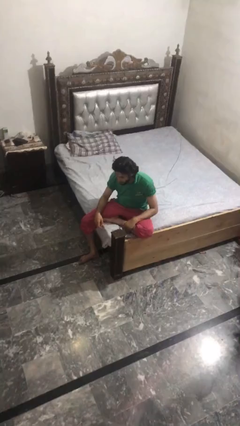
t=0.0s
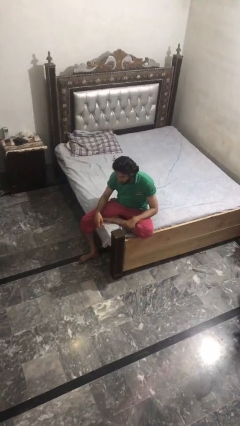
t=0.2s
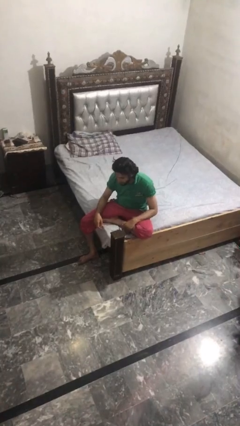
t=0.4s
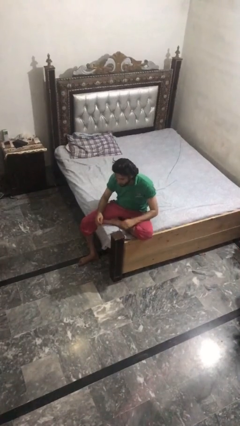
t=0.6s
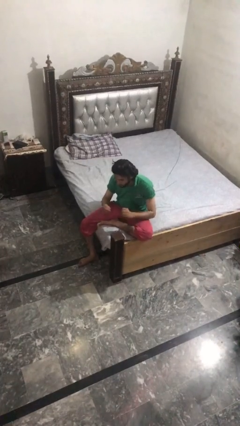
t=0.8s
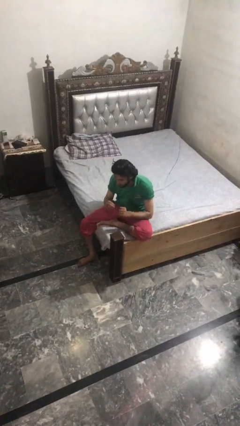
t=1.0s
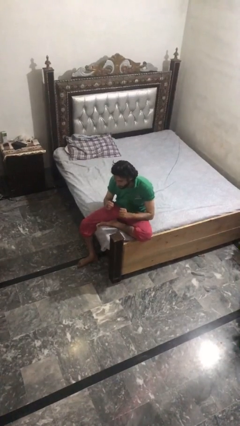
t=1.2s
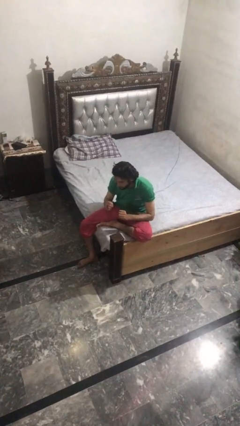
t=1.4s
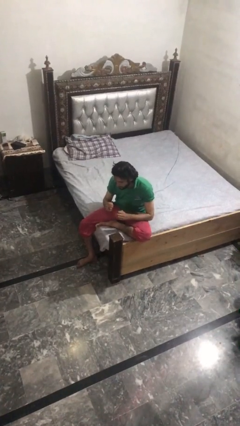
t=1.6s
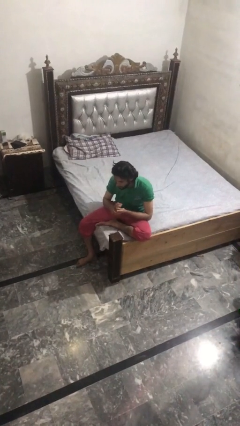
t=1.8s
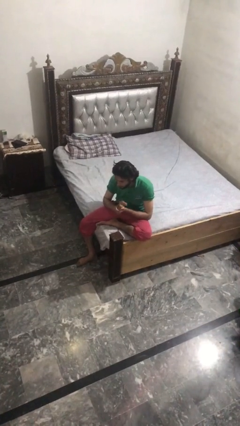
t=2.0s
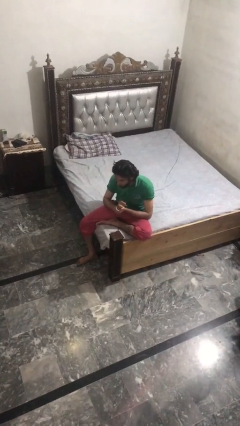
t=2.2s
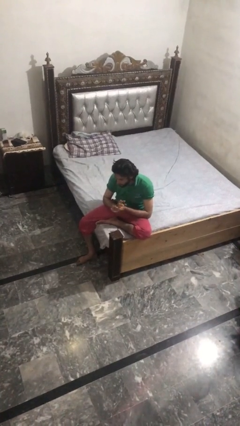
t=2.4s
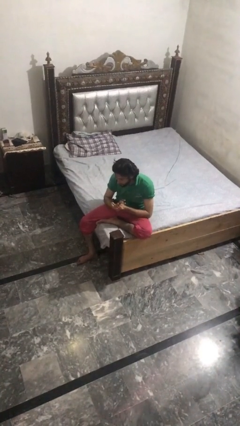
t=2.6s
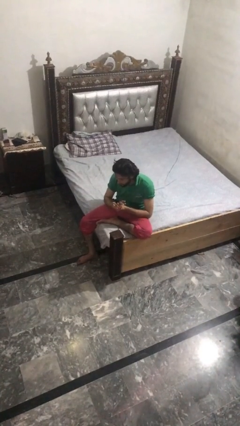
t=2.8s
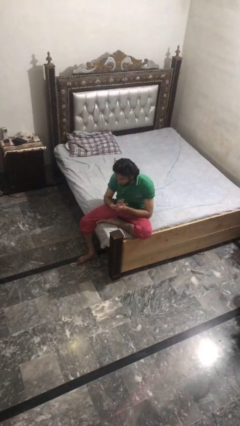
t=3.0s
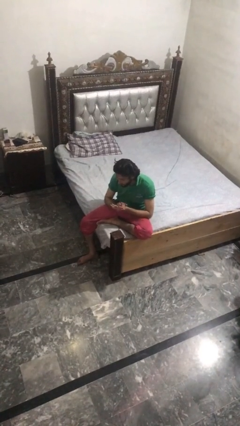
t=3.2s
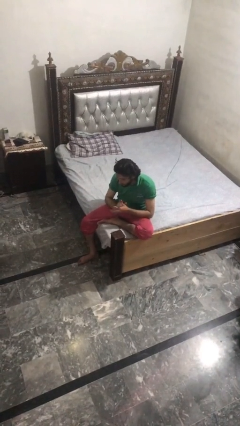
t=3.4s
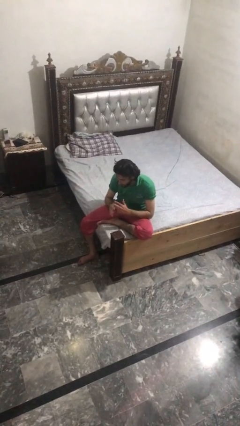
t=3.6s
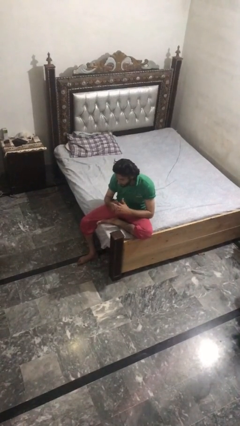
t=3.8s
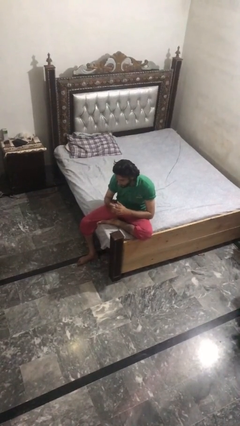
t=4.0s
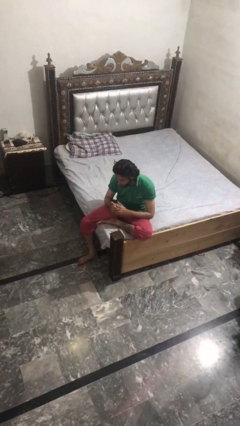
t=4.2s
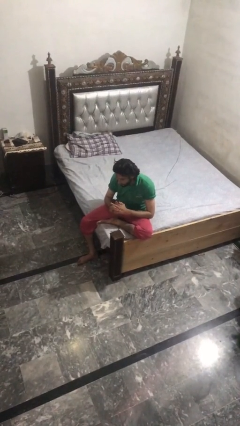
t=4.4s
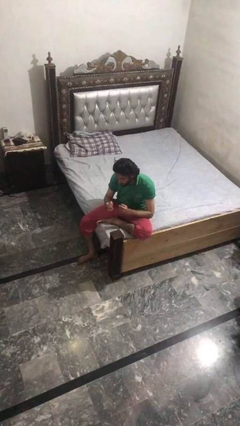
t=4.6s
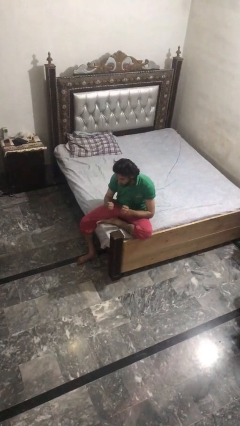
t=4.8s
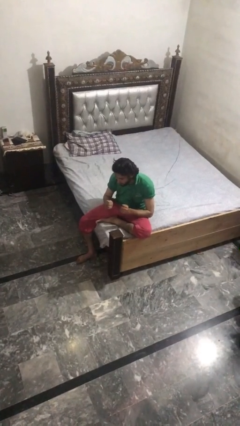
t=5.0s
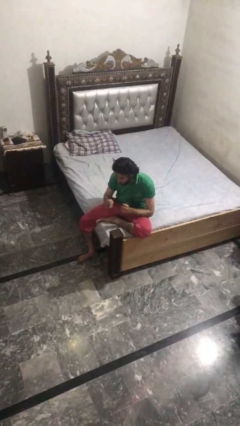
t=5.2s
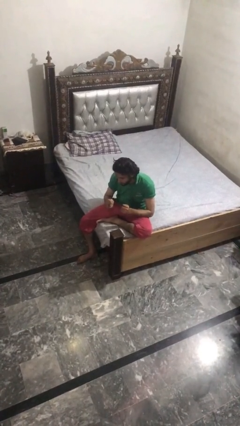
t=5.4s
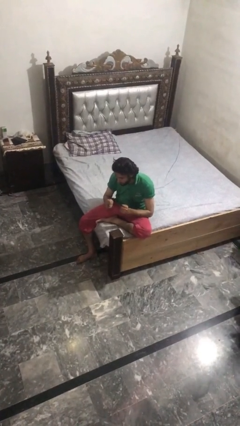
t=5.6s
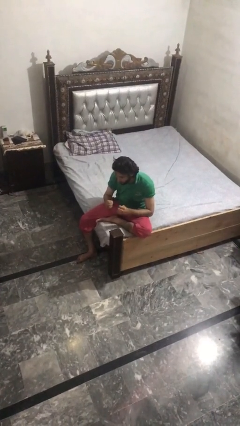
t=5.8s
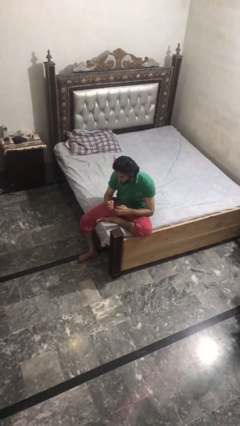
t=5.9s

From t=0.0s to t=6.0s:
person cracks knuckles

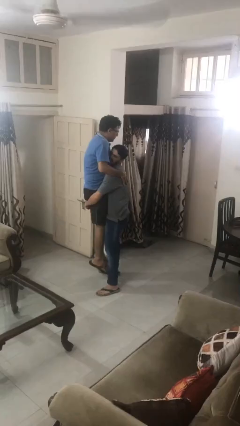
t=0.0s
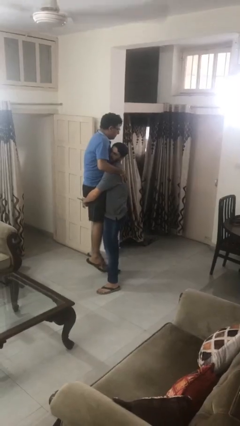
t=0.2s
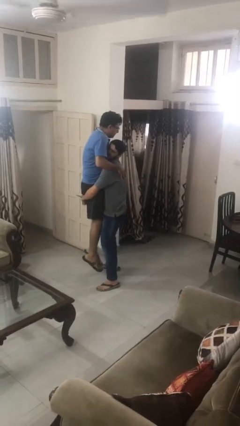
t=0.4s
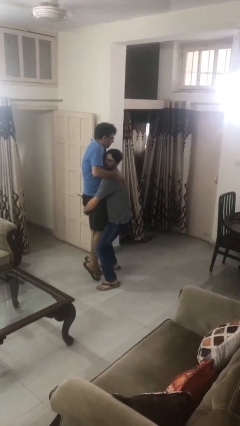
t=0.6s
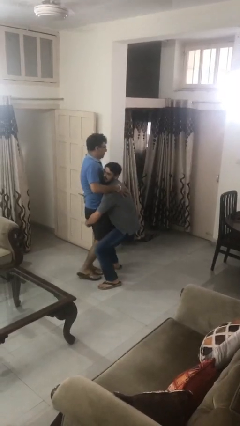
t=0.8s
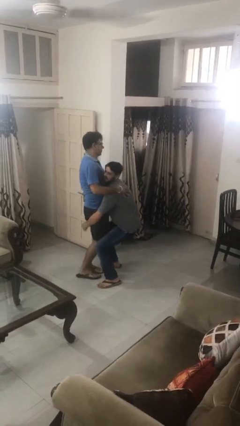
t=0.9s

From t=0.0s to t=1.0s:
person puts down person

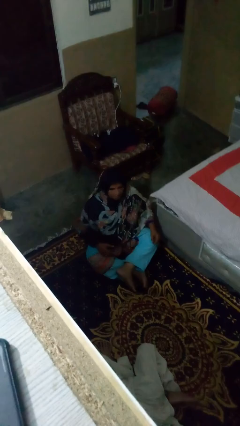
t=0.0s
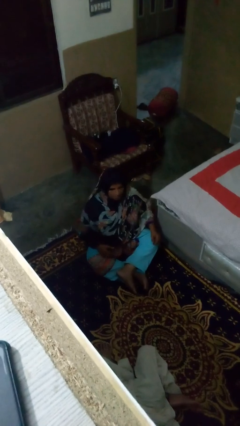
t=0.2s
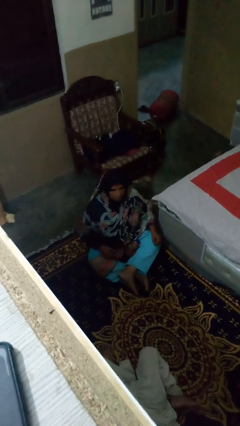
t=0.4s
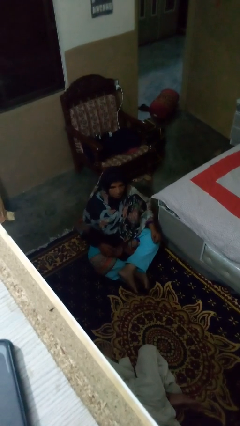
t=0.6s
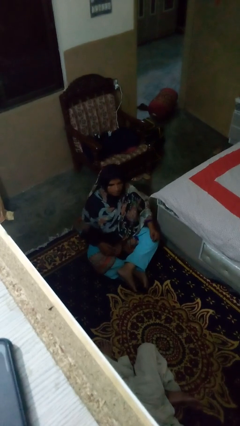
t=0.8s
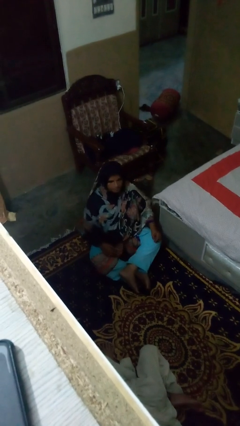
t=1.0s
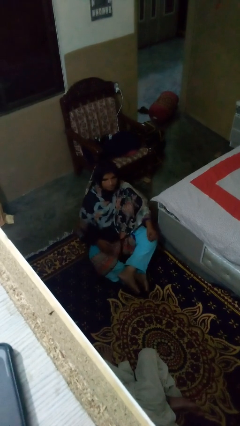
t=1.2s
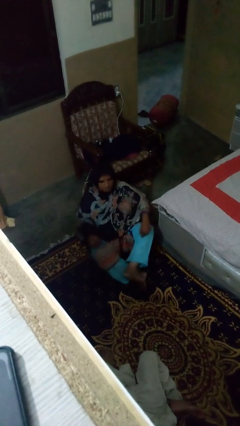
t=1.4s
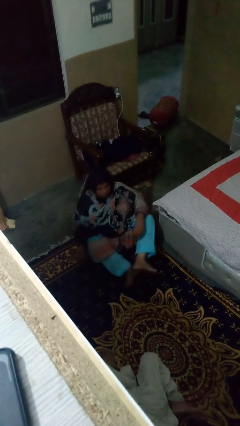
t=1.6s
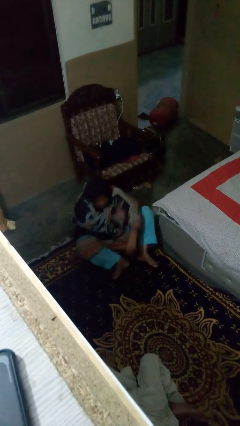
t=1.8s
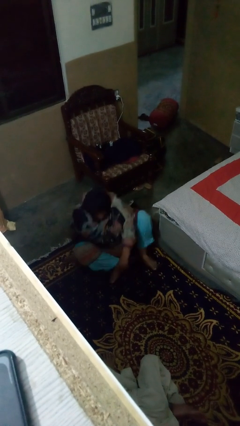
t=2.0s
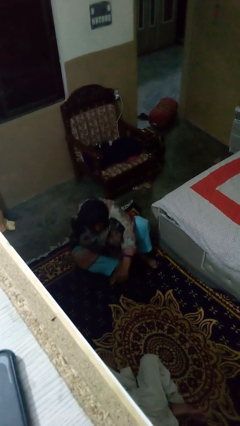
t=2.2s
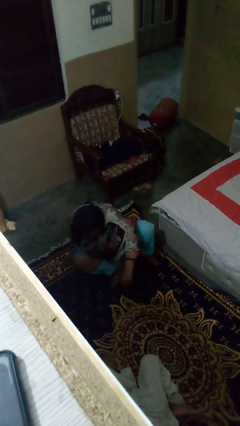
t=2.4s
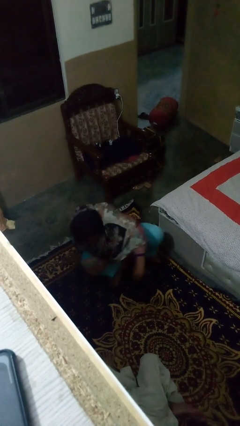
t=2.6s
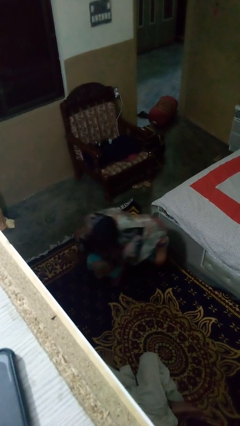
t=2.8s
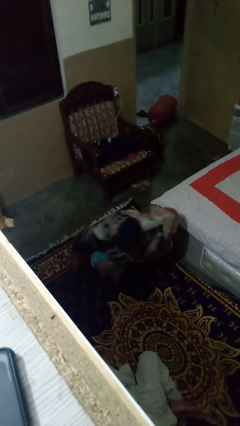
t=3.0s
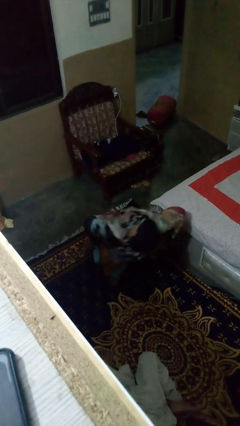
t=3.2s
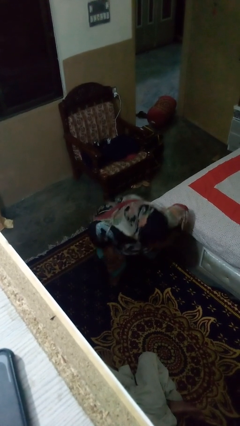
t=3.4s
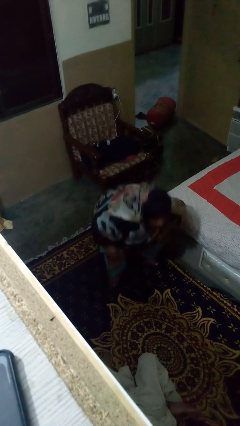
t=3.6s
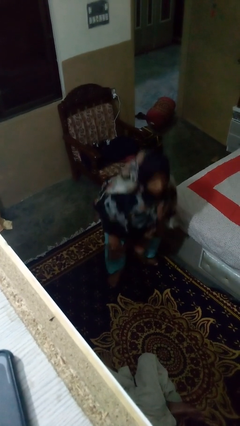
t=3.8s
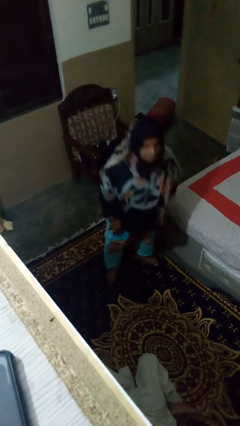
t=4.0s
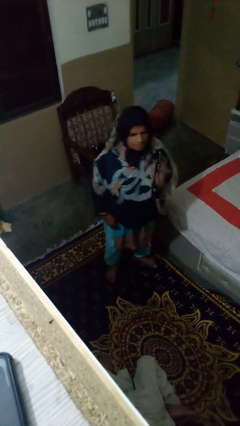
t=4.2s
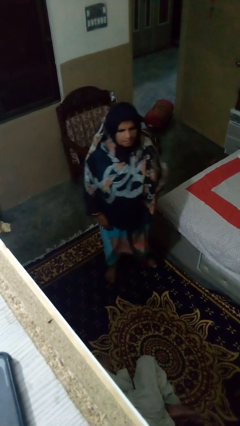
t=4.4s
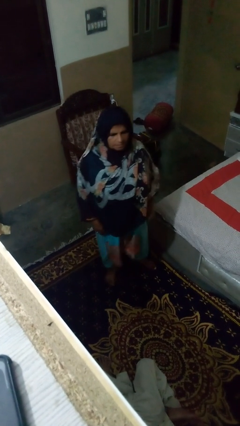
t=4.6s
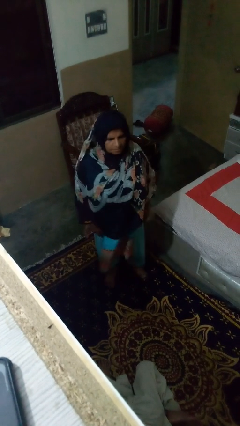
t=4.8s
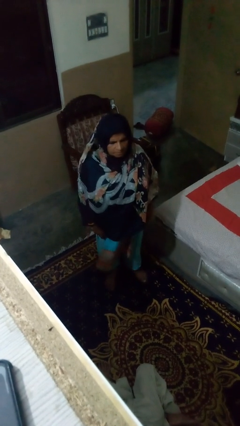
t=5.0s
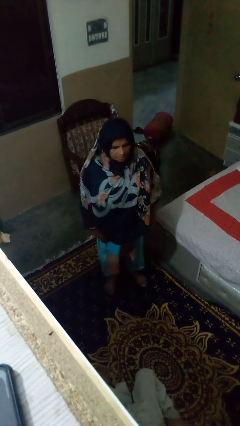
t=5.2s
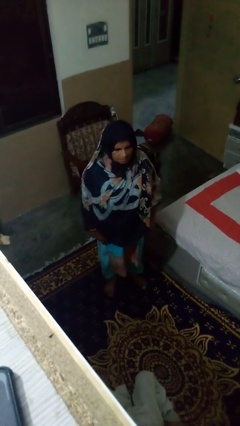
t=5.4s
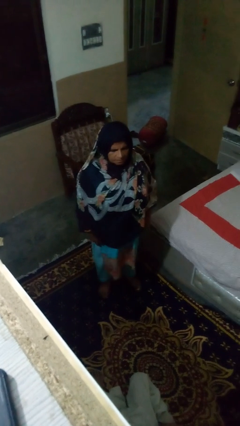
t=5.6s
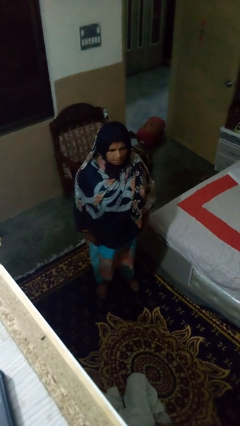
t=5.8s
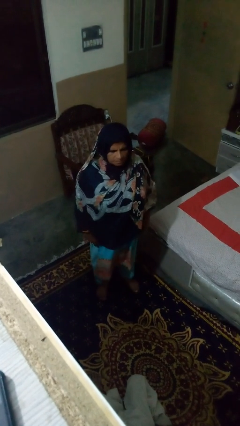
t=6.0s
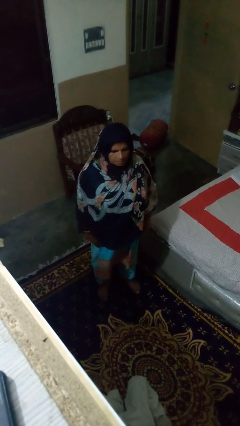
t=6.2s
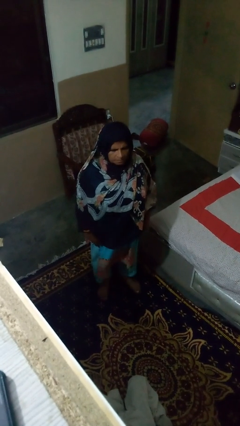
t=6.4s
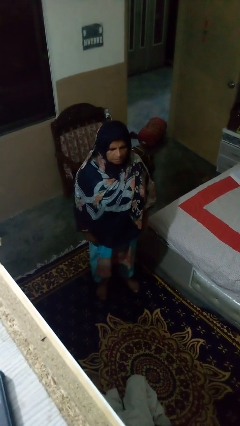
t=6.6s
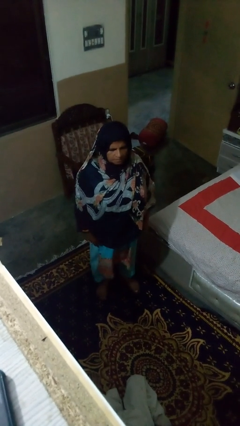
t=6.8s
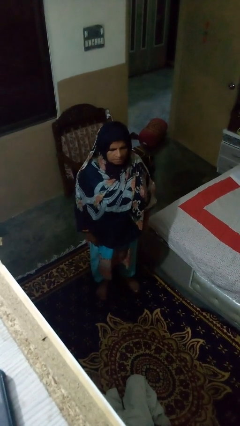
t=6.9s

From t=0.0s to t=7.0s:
person stands up from floor

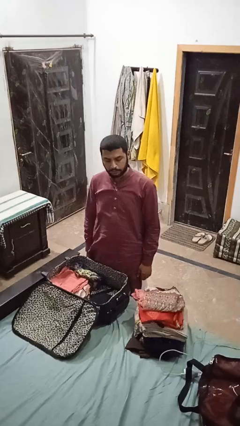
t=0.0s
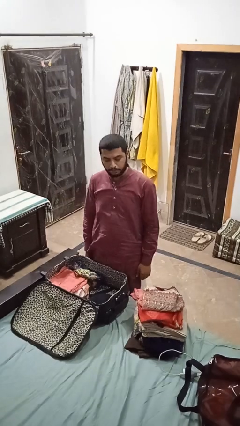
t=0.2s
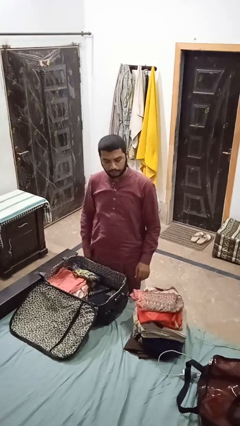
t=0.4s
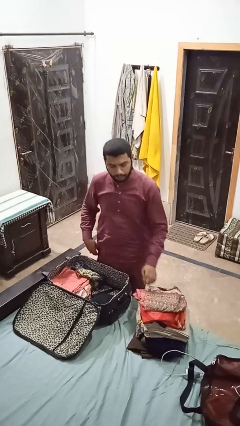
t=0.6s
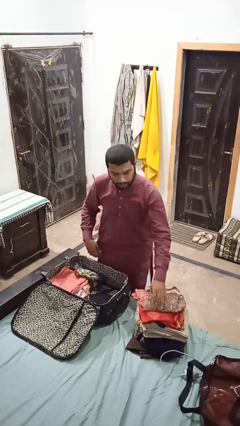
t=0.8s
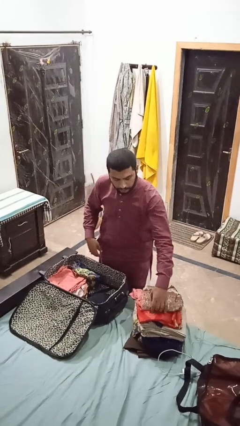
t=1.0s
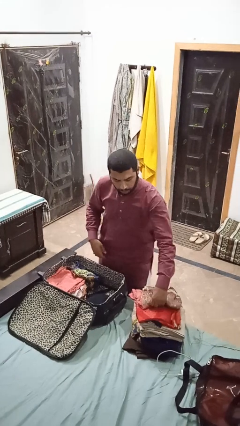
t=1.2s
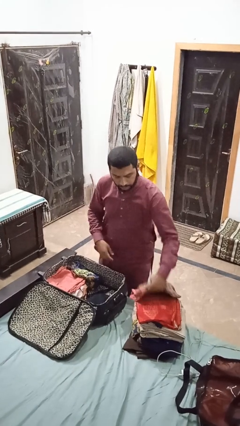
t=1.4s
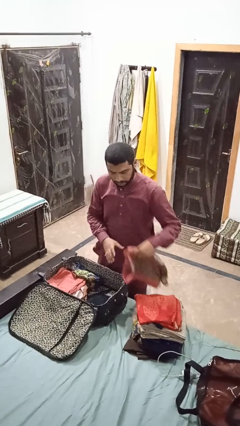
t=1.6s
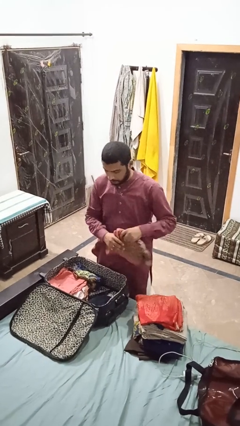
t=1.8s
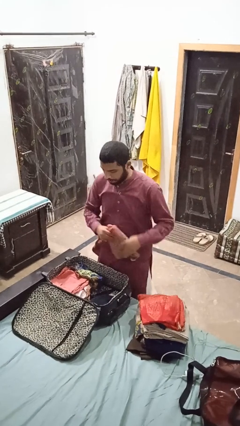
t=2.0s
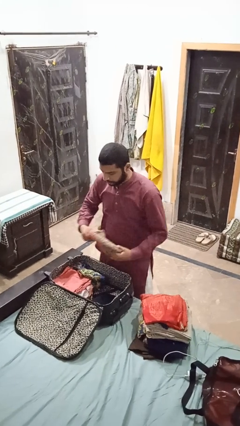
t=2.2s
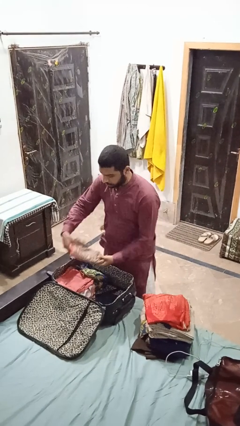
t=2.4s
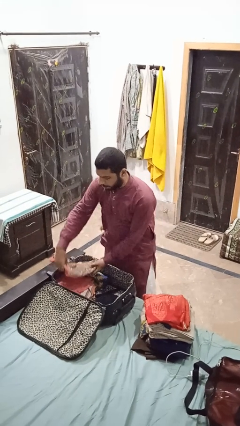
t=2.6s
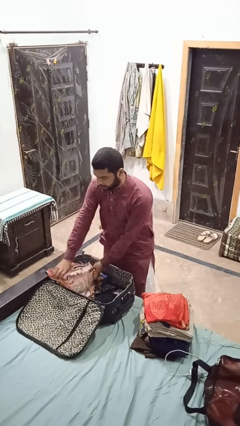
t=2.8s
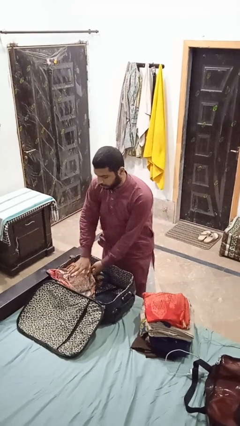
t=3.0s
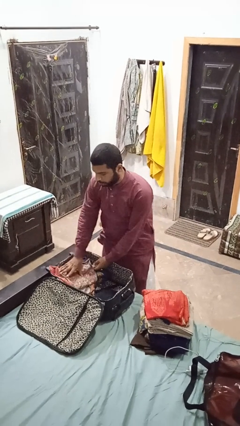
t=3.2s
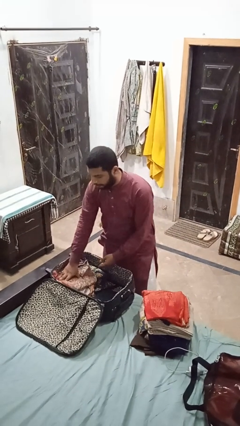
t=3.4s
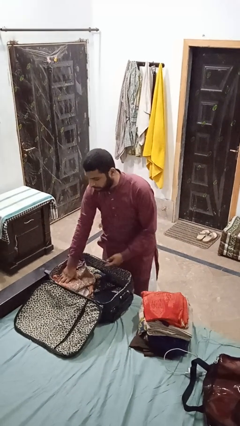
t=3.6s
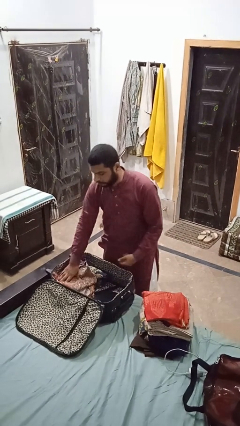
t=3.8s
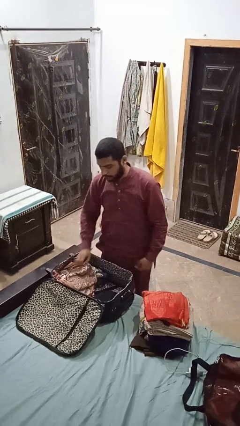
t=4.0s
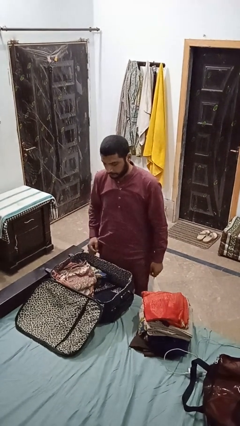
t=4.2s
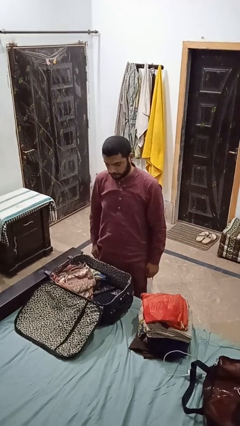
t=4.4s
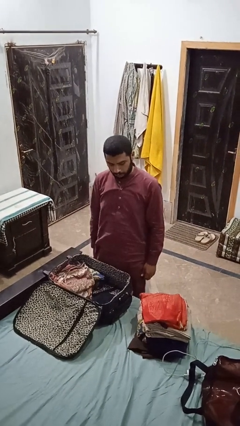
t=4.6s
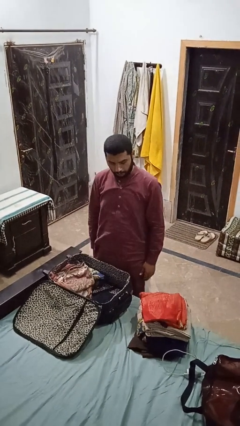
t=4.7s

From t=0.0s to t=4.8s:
person loads clothes into suitcase
